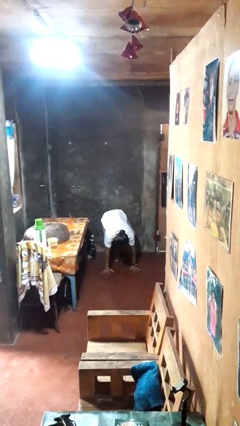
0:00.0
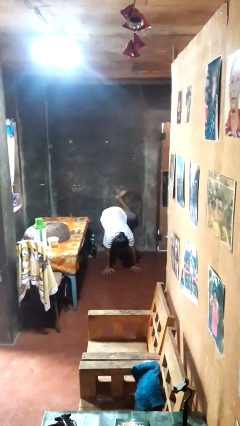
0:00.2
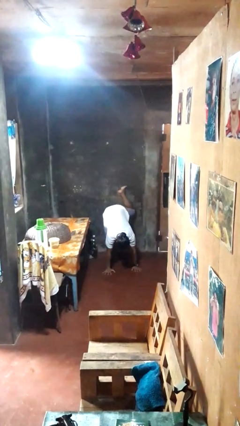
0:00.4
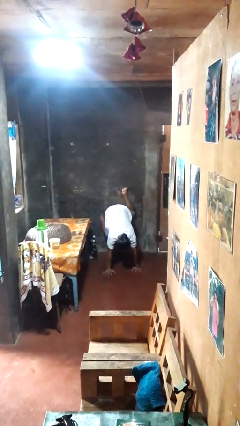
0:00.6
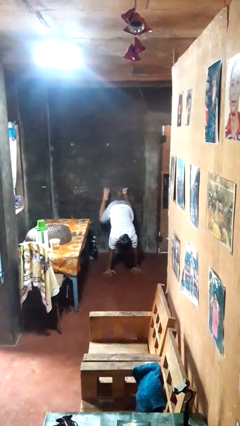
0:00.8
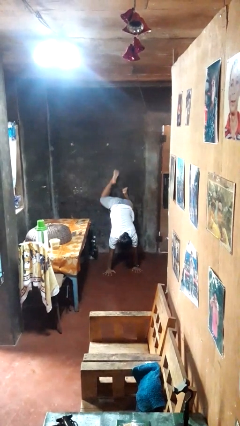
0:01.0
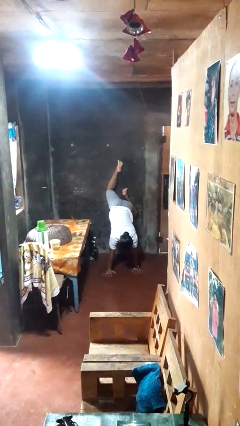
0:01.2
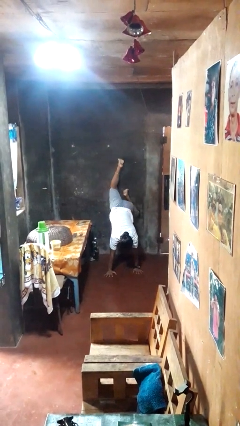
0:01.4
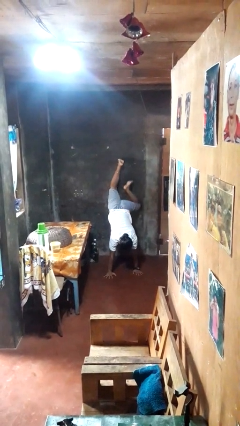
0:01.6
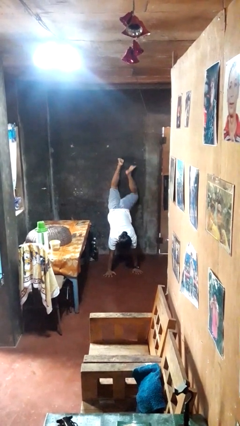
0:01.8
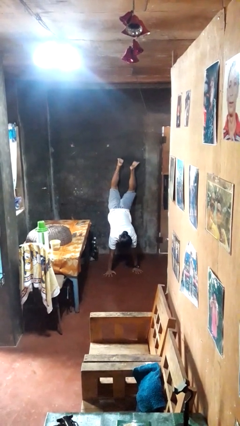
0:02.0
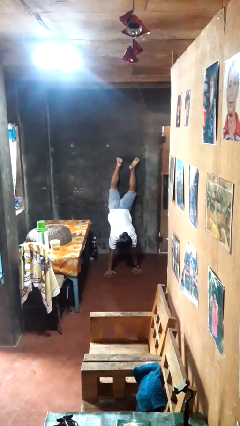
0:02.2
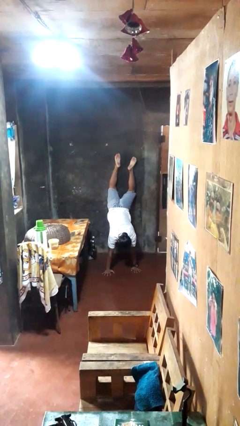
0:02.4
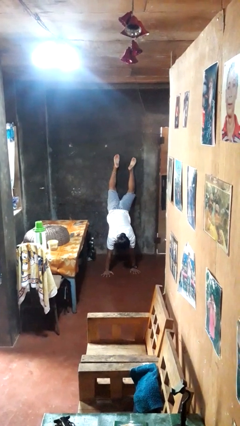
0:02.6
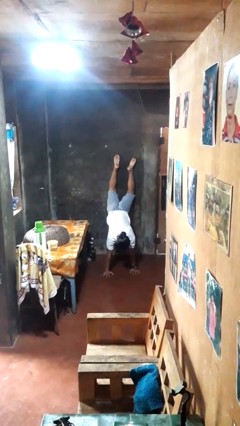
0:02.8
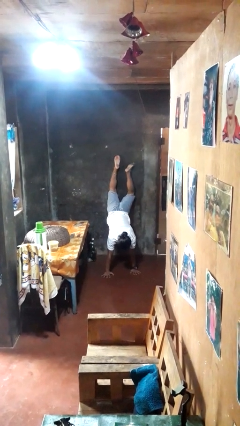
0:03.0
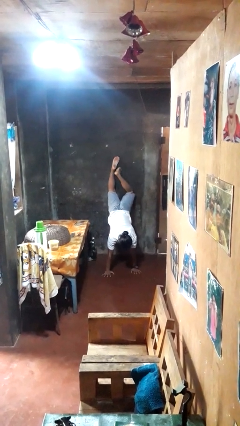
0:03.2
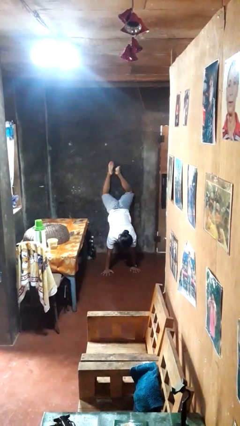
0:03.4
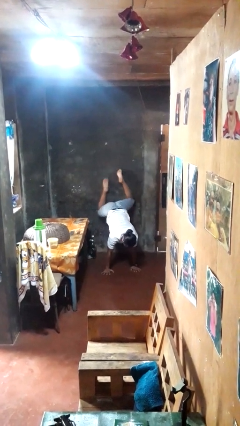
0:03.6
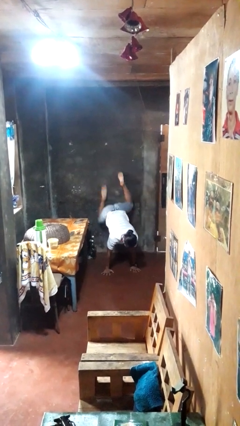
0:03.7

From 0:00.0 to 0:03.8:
person handstand

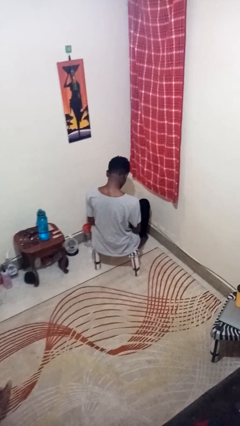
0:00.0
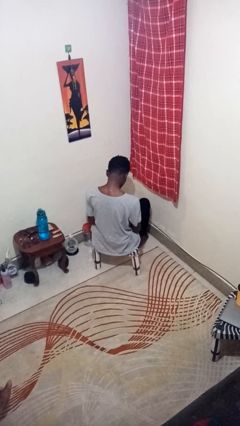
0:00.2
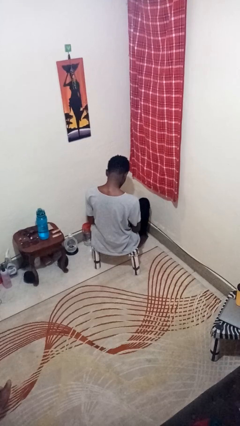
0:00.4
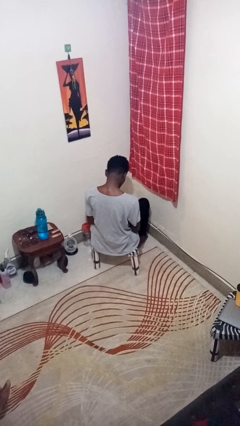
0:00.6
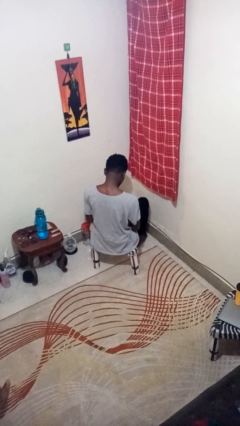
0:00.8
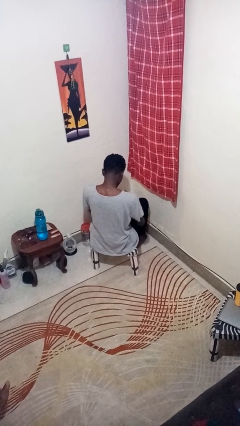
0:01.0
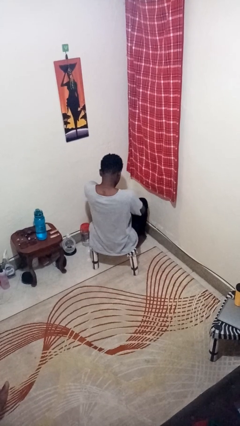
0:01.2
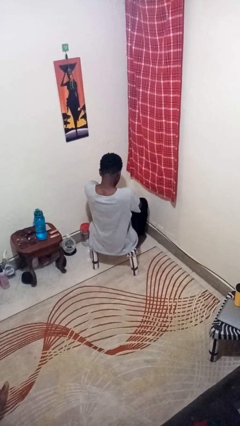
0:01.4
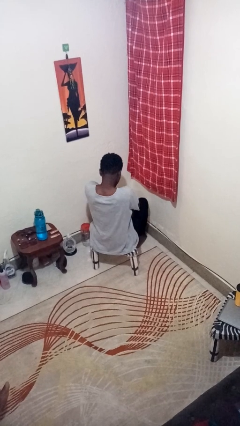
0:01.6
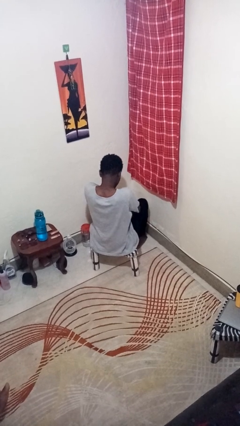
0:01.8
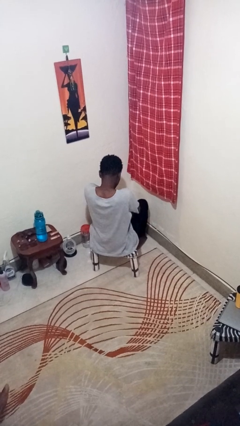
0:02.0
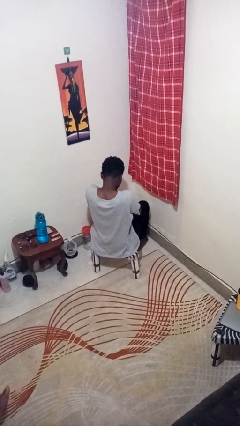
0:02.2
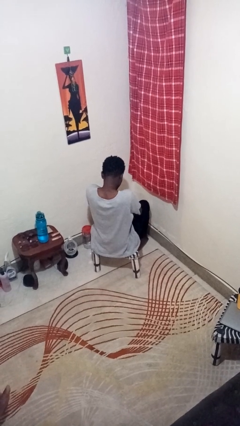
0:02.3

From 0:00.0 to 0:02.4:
person crosses arms

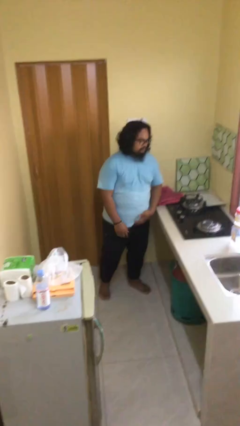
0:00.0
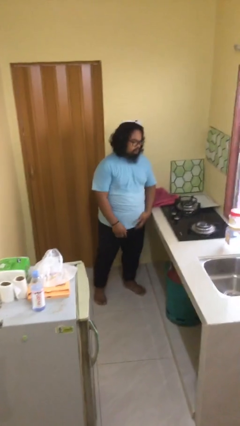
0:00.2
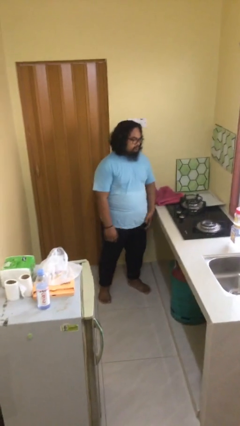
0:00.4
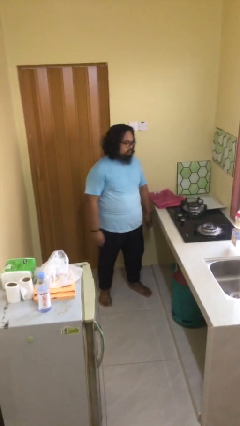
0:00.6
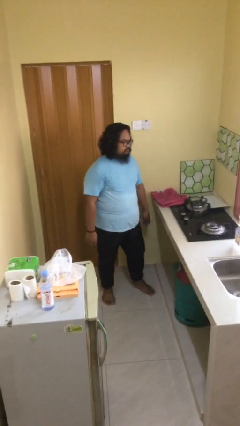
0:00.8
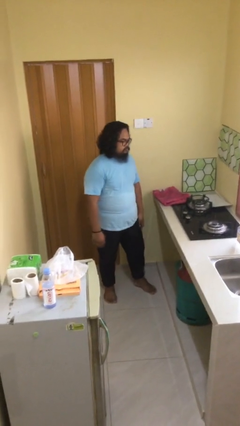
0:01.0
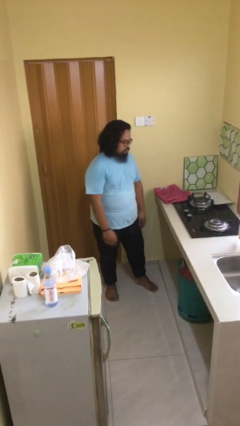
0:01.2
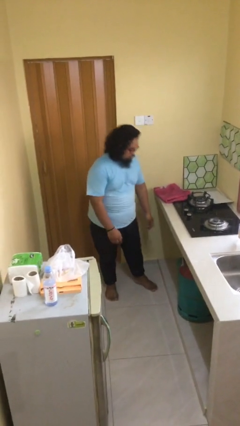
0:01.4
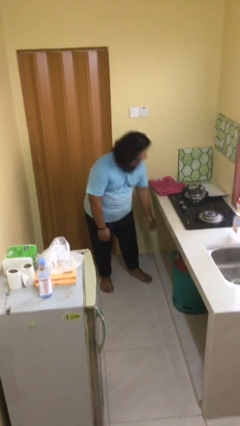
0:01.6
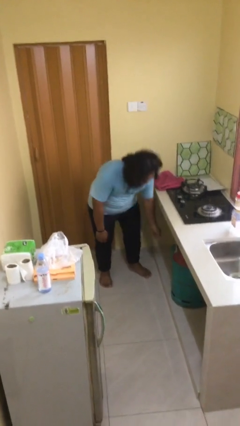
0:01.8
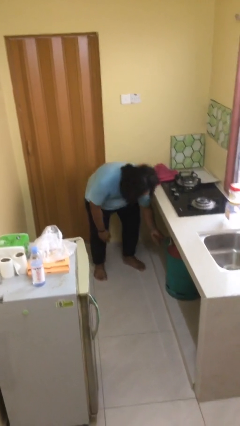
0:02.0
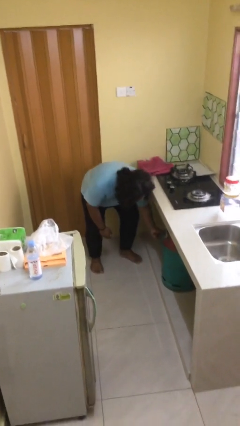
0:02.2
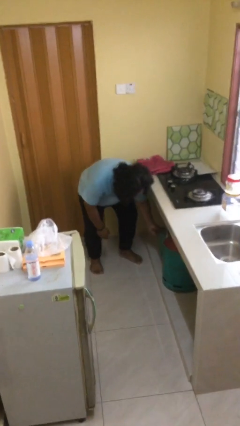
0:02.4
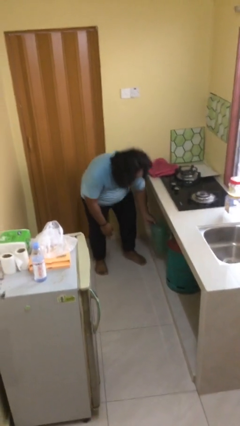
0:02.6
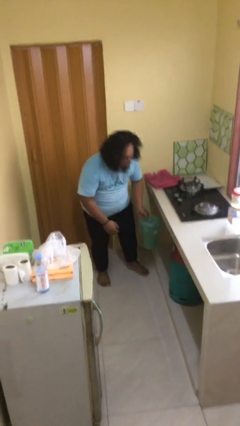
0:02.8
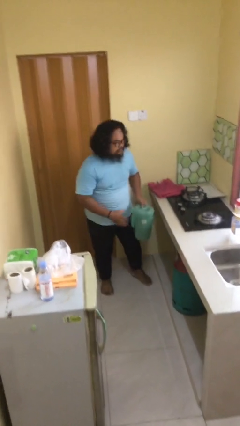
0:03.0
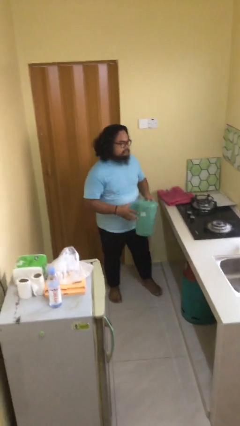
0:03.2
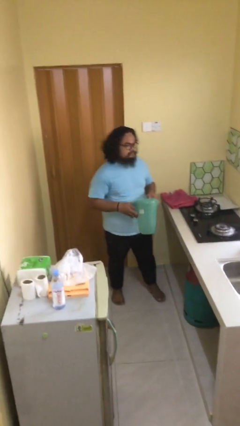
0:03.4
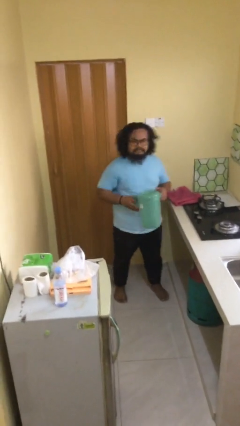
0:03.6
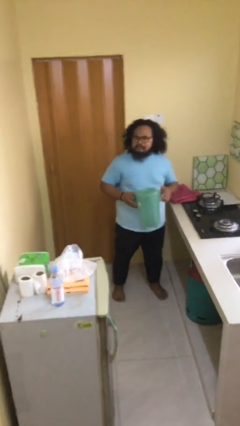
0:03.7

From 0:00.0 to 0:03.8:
person picks up object from cabinet

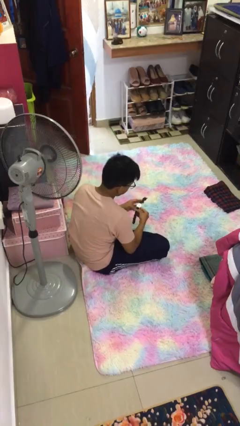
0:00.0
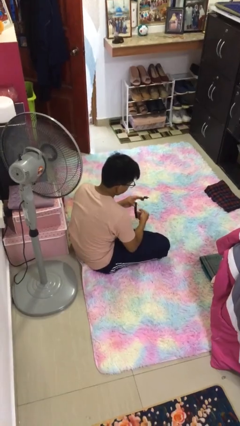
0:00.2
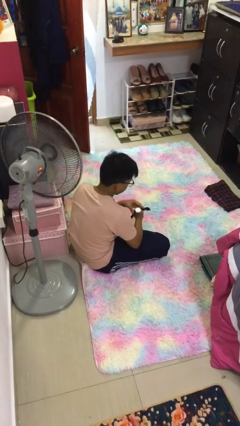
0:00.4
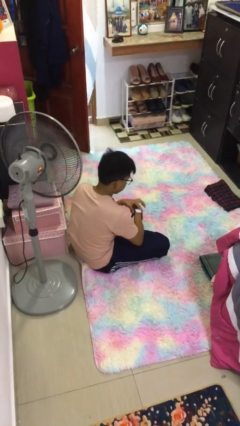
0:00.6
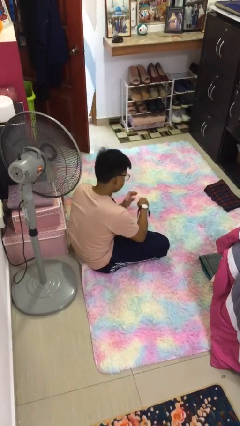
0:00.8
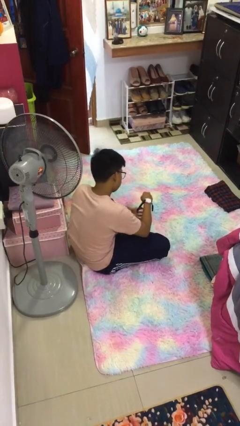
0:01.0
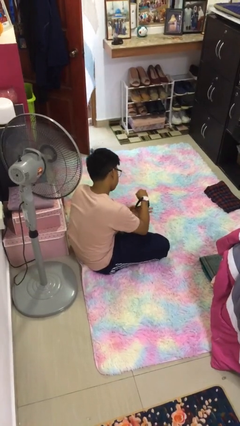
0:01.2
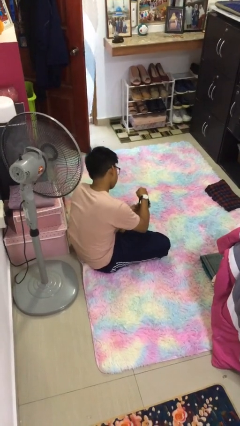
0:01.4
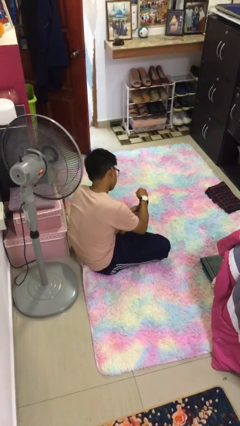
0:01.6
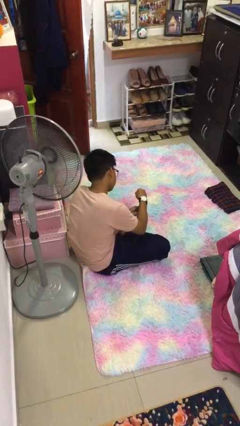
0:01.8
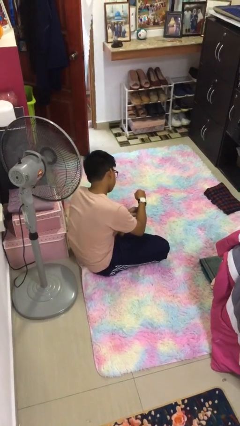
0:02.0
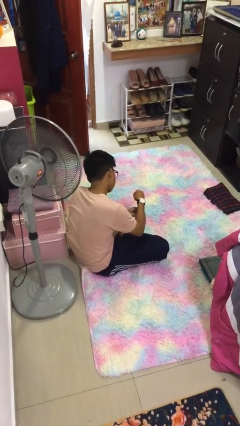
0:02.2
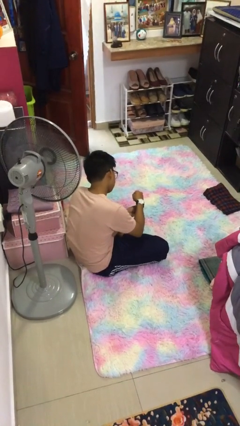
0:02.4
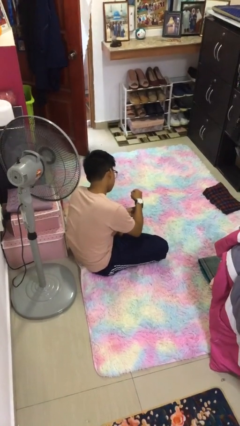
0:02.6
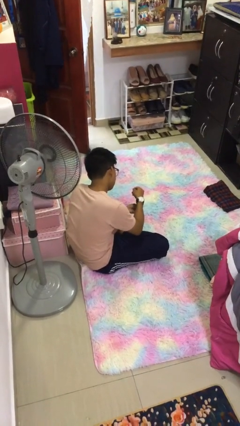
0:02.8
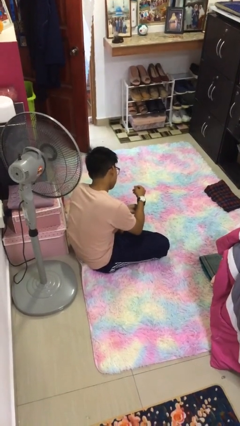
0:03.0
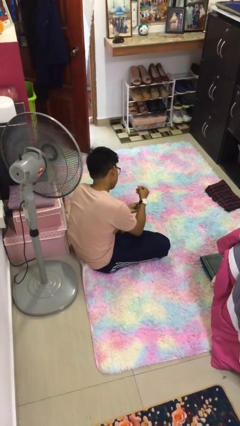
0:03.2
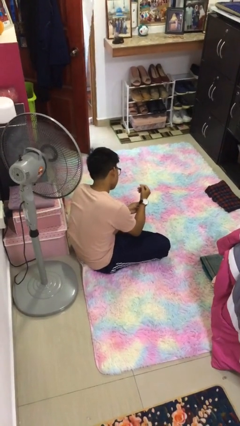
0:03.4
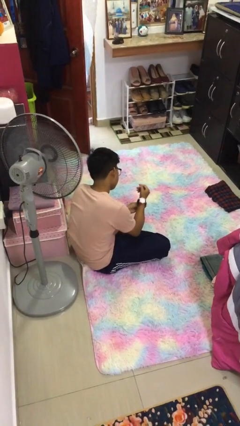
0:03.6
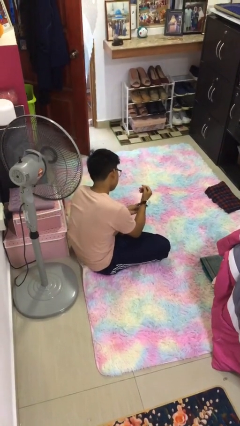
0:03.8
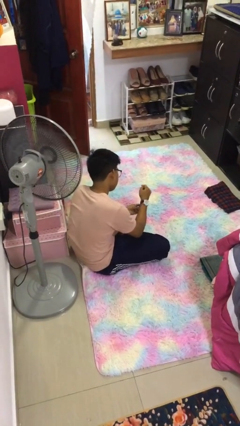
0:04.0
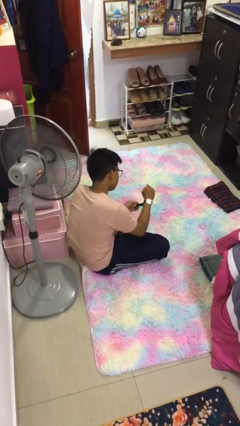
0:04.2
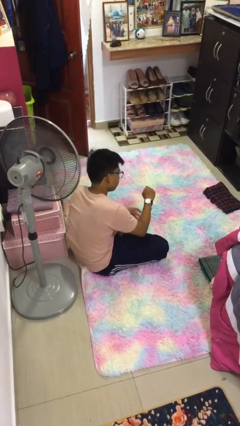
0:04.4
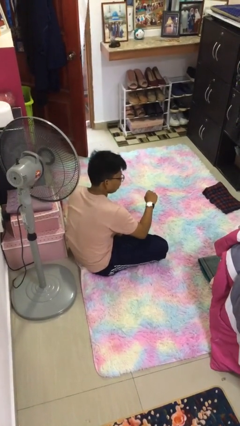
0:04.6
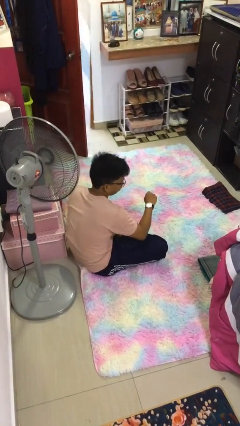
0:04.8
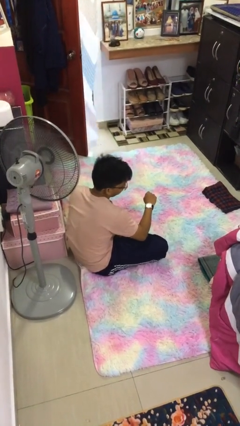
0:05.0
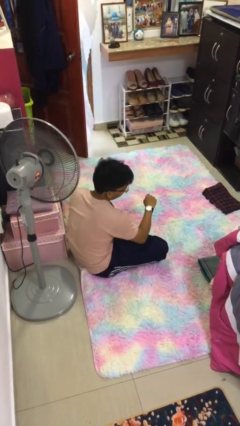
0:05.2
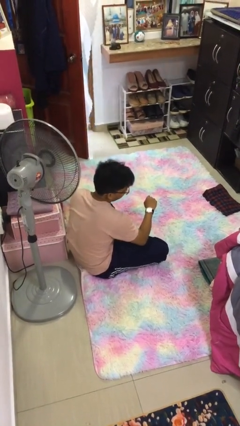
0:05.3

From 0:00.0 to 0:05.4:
person puts on wristwatch

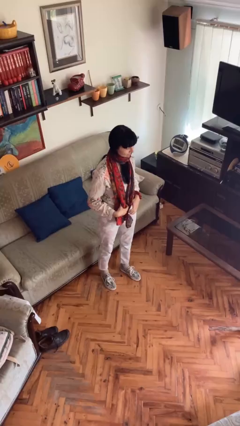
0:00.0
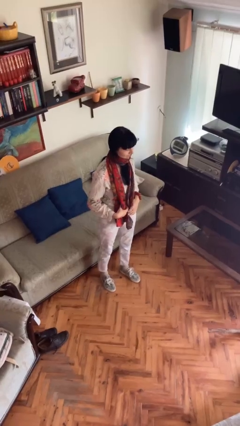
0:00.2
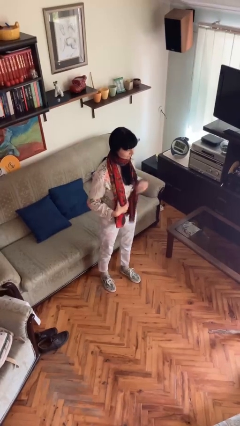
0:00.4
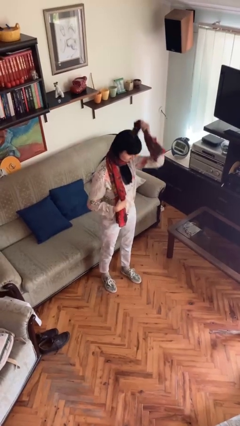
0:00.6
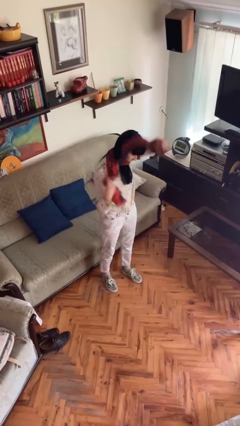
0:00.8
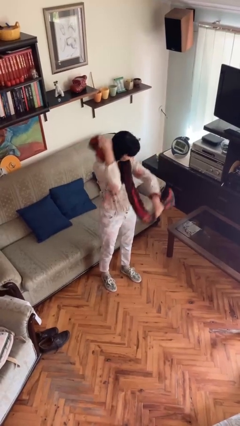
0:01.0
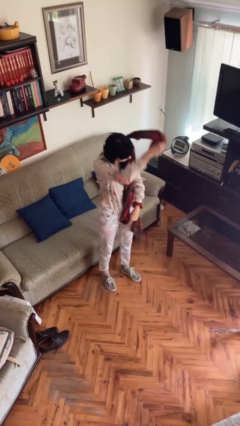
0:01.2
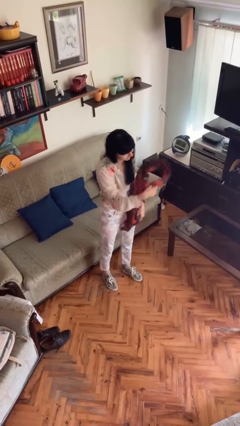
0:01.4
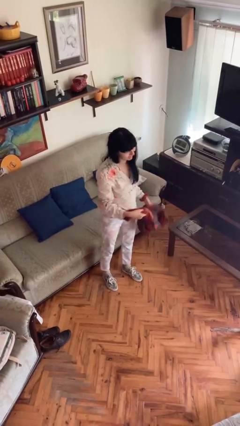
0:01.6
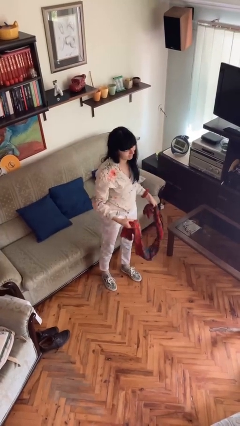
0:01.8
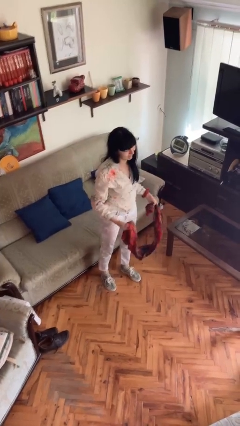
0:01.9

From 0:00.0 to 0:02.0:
person takes off scarf

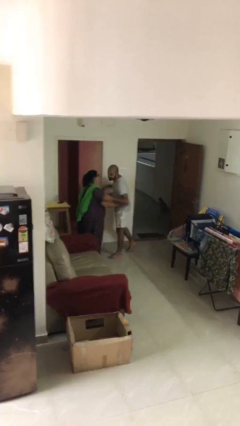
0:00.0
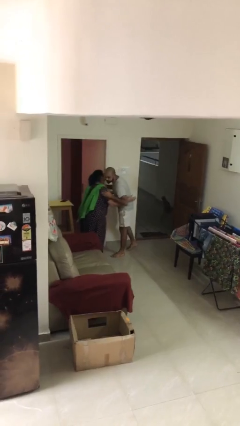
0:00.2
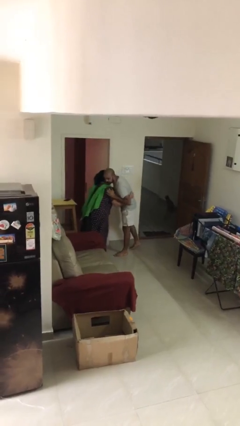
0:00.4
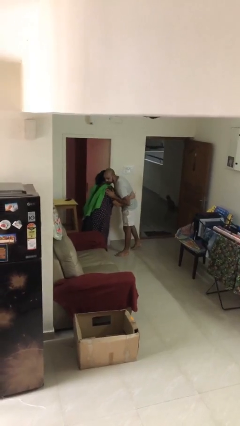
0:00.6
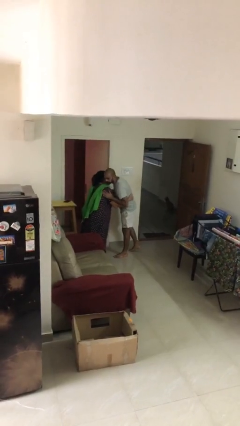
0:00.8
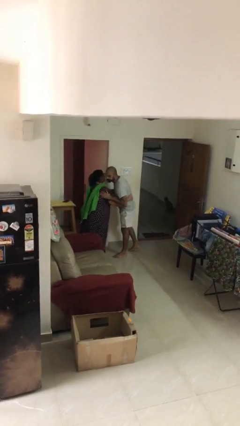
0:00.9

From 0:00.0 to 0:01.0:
person embraces person
